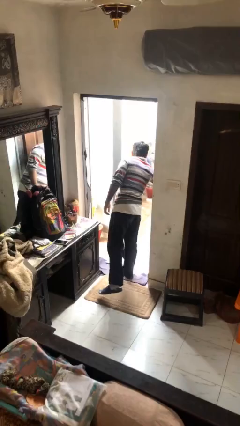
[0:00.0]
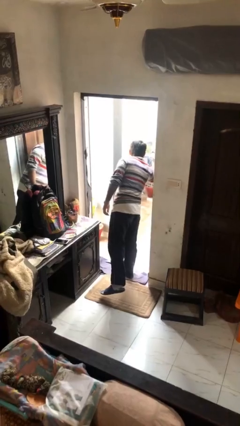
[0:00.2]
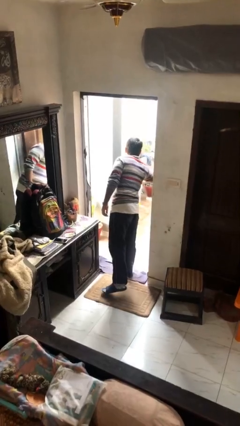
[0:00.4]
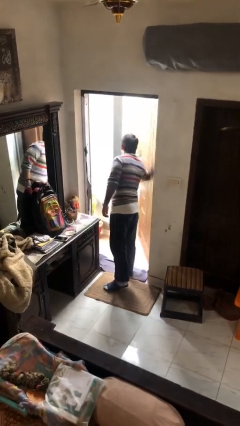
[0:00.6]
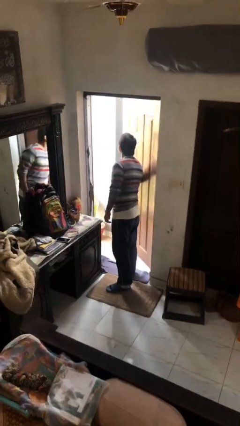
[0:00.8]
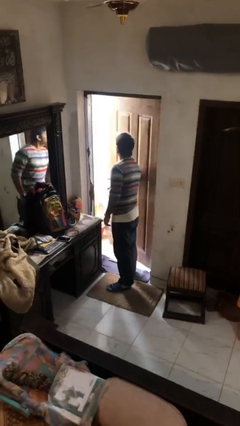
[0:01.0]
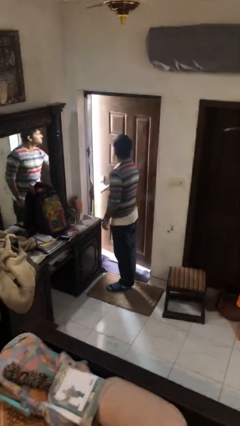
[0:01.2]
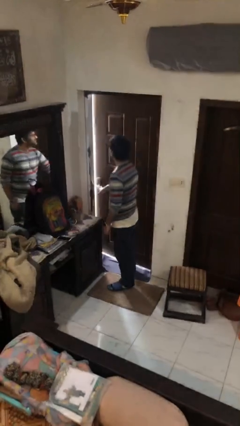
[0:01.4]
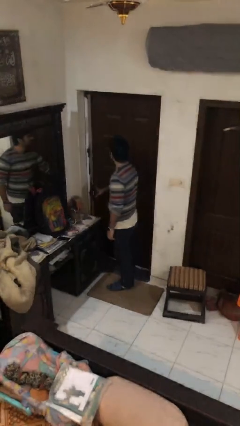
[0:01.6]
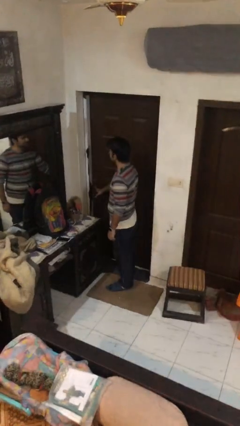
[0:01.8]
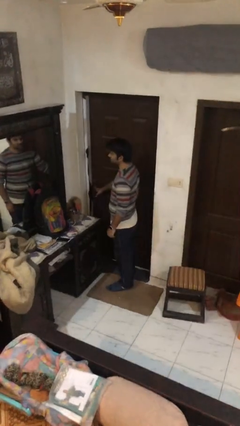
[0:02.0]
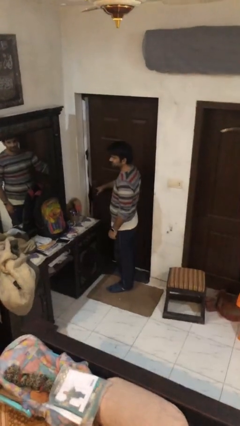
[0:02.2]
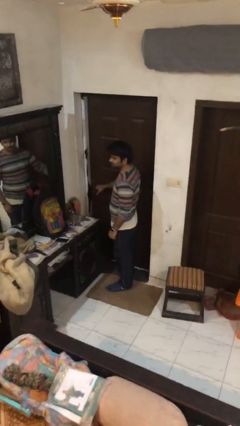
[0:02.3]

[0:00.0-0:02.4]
person closes facility door

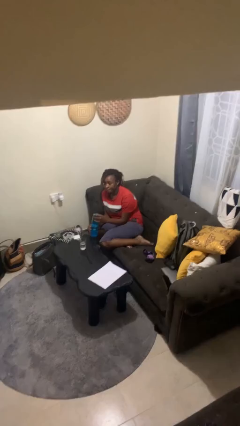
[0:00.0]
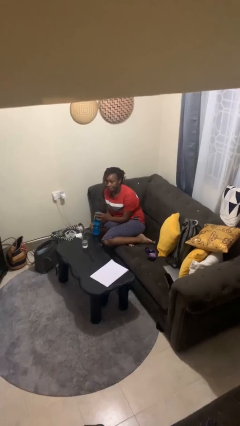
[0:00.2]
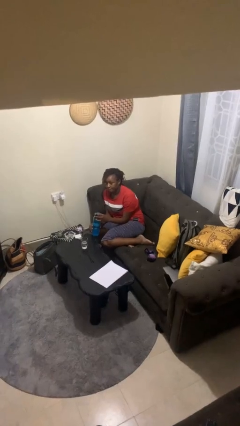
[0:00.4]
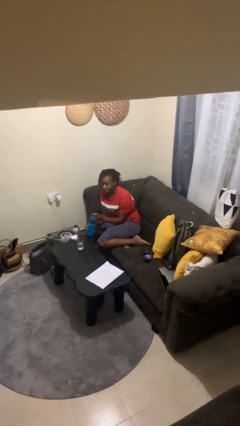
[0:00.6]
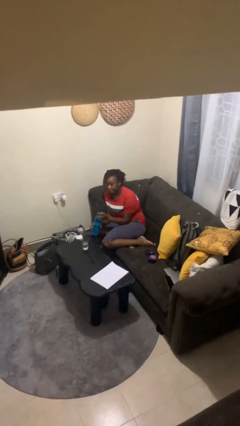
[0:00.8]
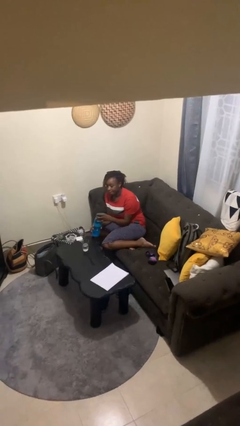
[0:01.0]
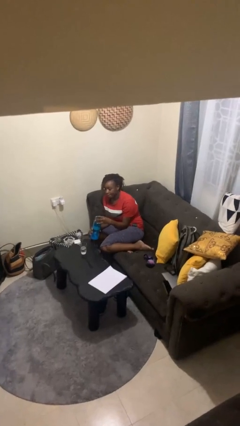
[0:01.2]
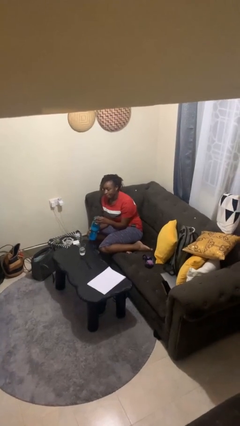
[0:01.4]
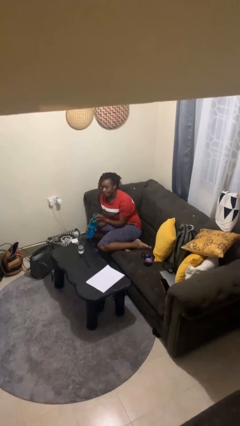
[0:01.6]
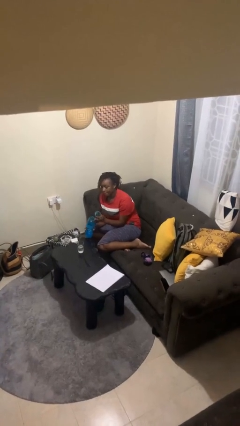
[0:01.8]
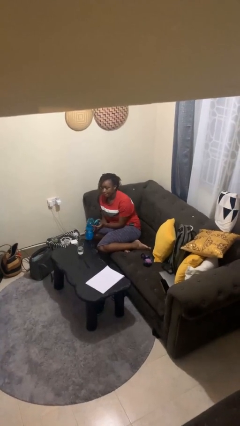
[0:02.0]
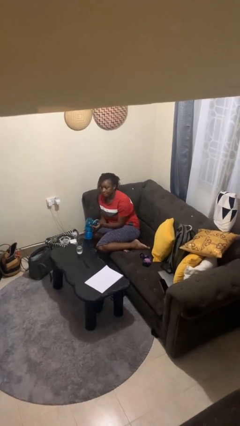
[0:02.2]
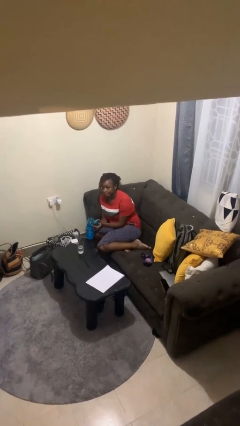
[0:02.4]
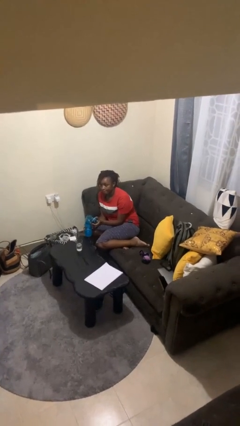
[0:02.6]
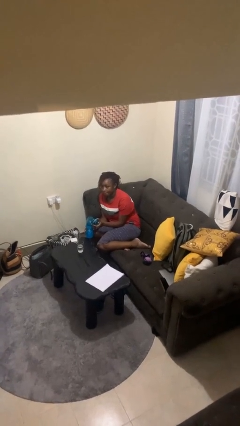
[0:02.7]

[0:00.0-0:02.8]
person unscrews lid from bottle

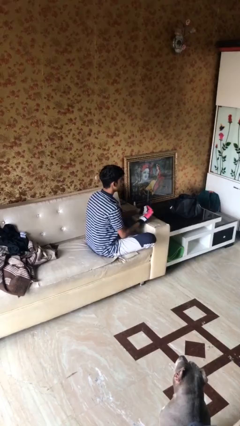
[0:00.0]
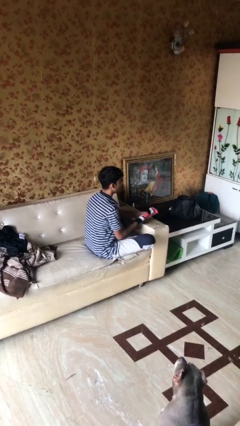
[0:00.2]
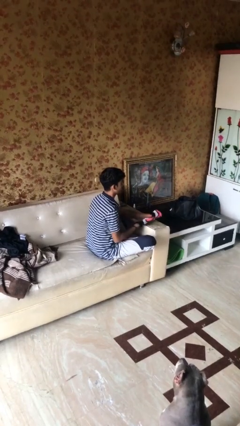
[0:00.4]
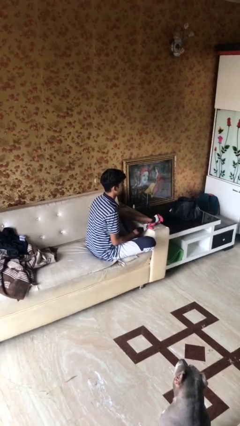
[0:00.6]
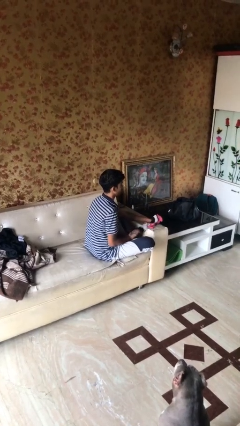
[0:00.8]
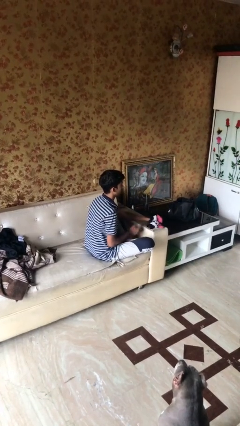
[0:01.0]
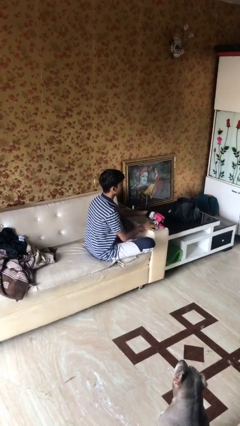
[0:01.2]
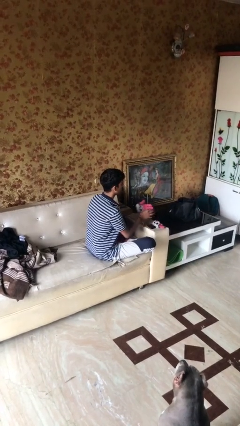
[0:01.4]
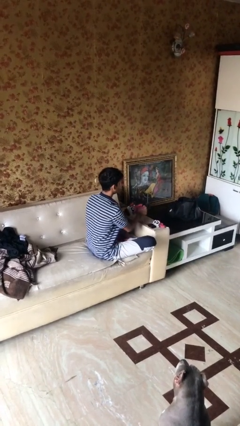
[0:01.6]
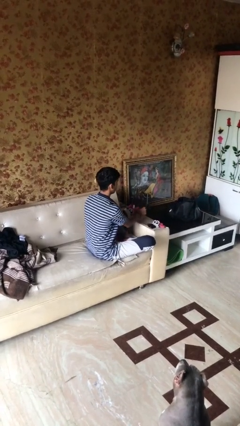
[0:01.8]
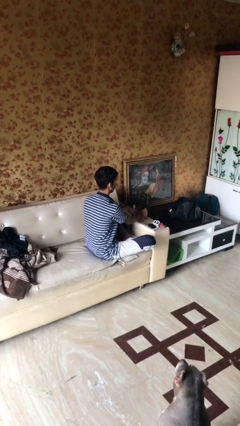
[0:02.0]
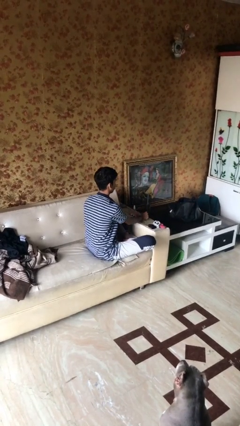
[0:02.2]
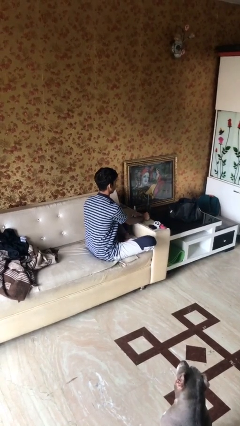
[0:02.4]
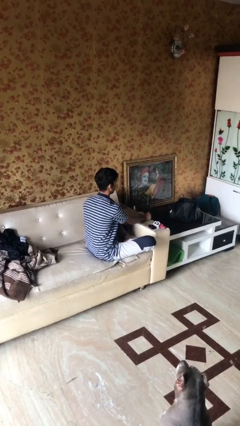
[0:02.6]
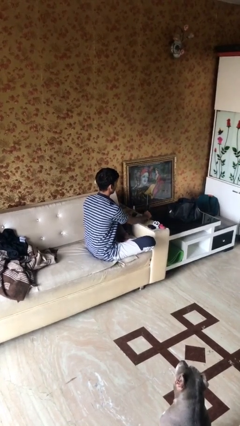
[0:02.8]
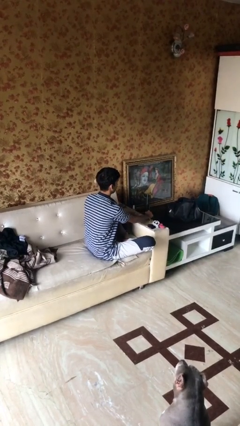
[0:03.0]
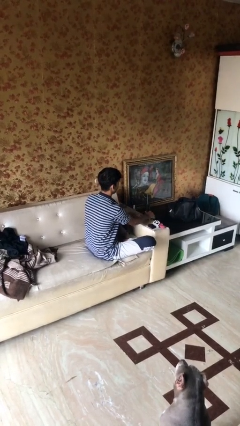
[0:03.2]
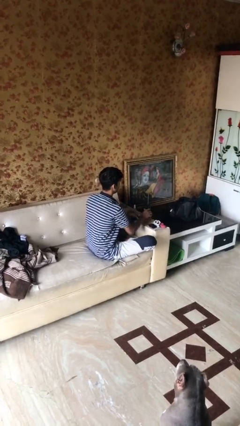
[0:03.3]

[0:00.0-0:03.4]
person takes off gloves

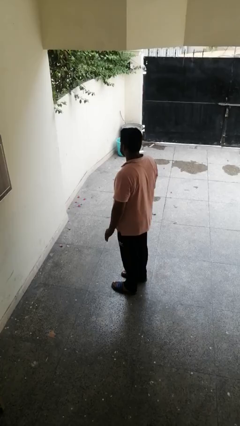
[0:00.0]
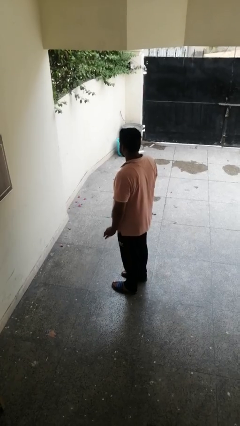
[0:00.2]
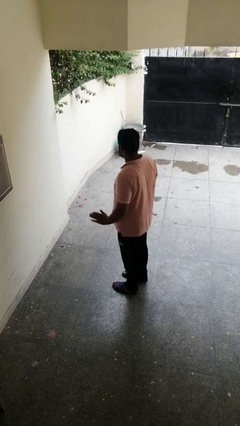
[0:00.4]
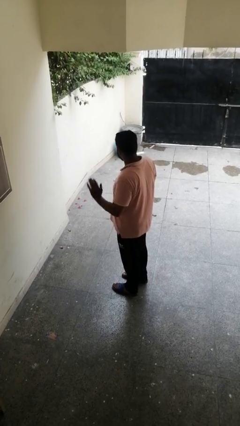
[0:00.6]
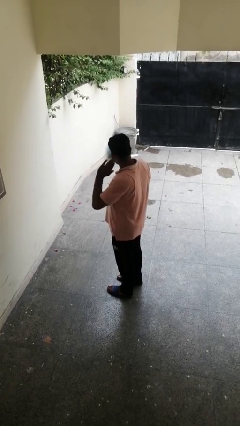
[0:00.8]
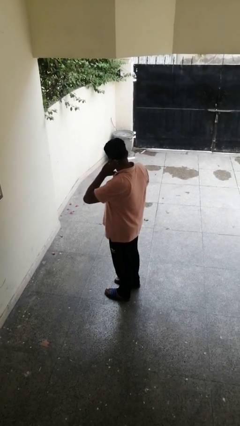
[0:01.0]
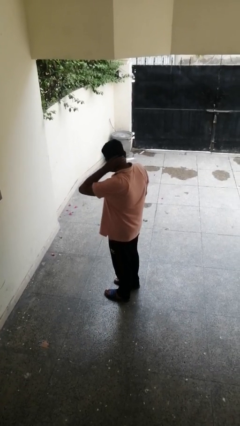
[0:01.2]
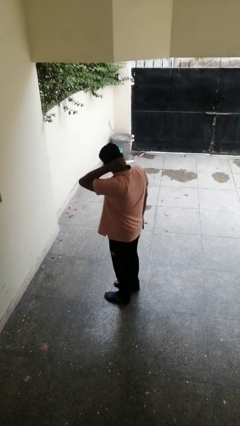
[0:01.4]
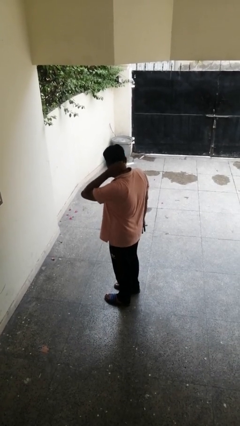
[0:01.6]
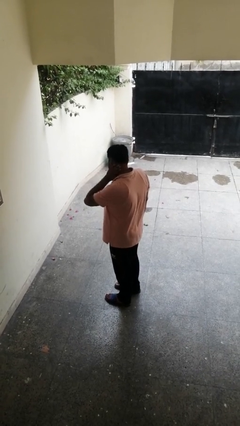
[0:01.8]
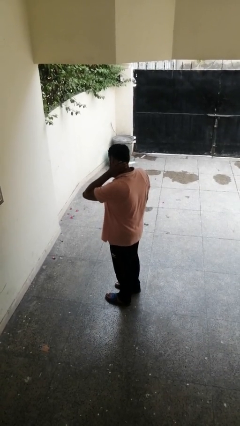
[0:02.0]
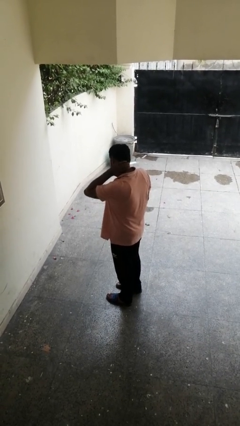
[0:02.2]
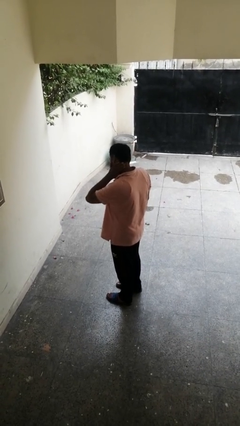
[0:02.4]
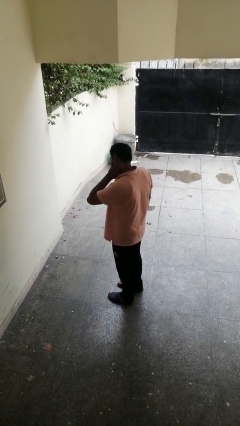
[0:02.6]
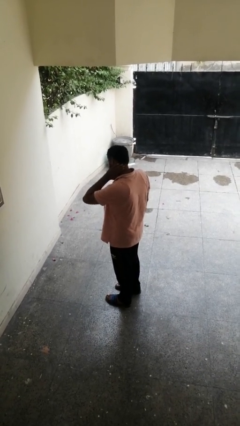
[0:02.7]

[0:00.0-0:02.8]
person rubs neck

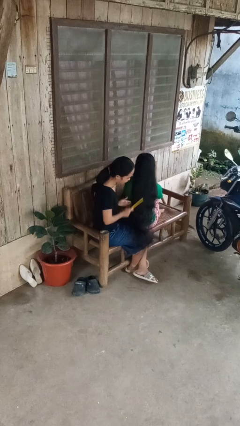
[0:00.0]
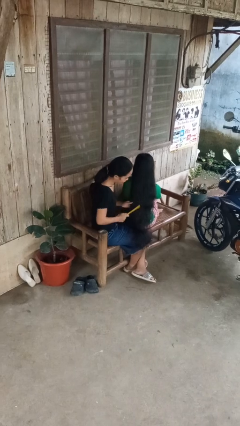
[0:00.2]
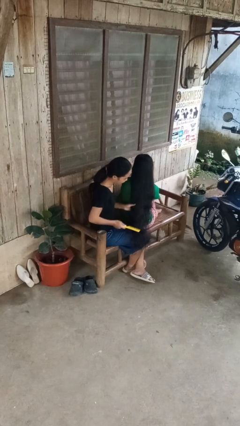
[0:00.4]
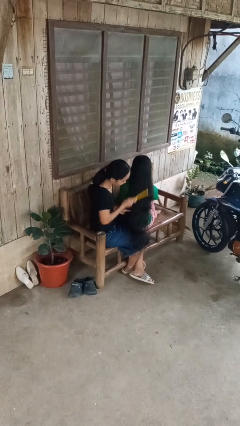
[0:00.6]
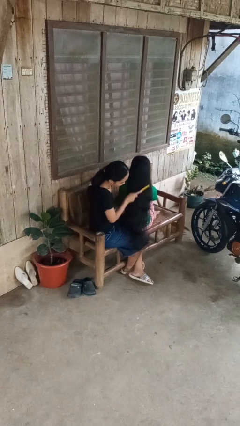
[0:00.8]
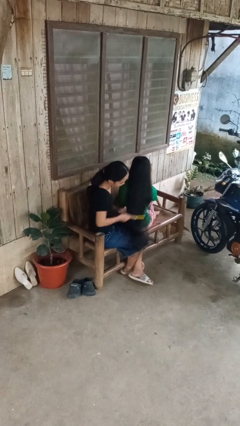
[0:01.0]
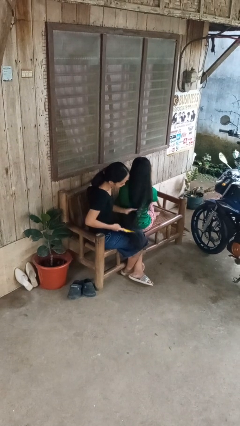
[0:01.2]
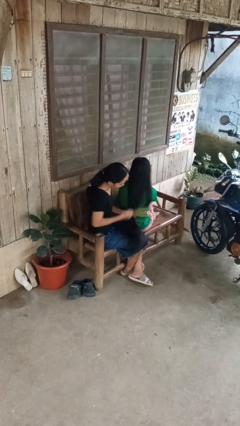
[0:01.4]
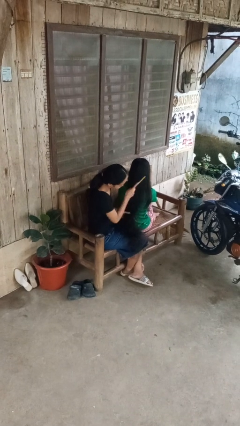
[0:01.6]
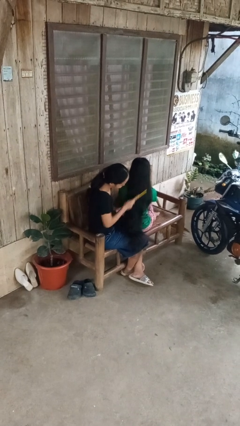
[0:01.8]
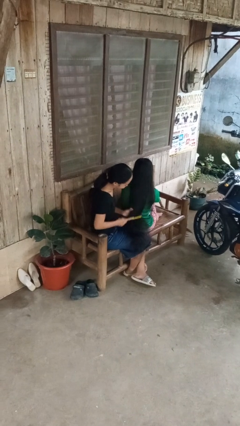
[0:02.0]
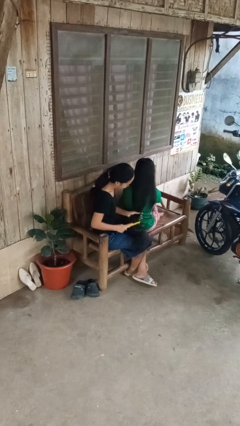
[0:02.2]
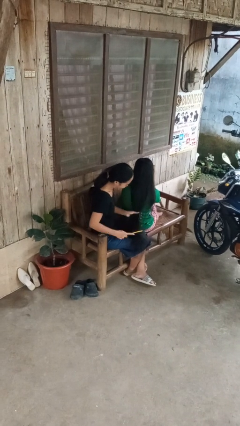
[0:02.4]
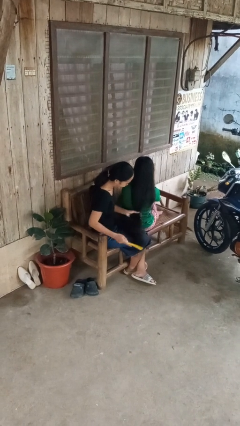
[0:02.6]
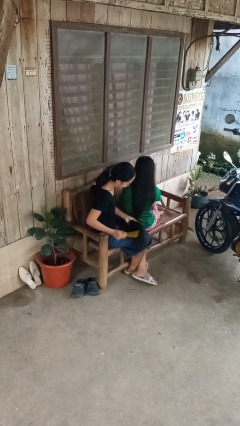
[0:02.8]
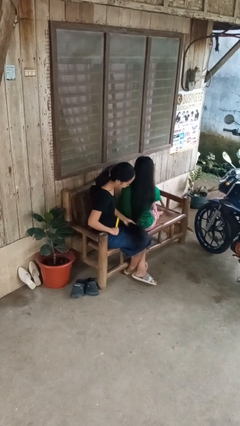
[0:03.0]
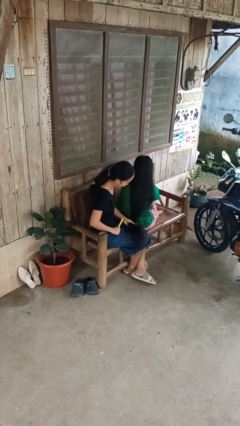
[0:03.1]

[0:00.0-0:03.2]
person brushes hair of person

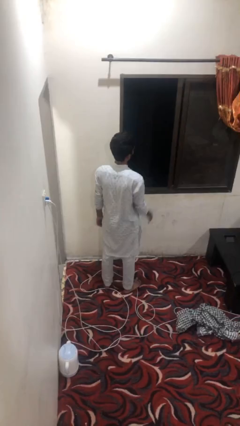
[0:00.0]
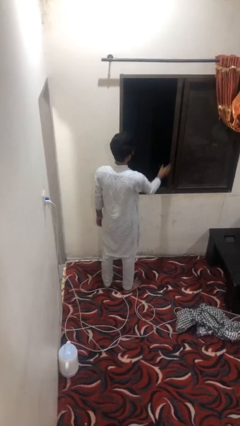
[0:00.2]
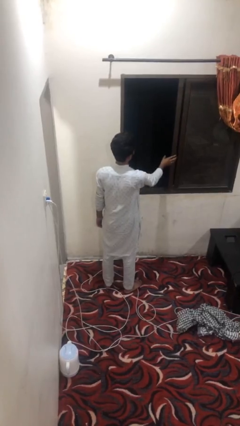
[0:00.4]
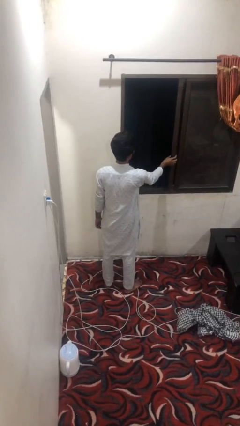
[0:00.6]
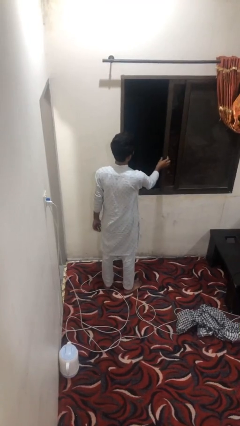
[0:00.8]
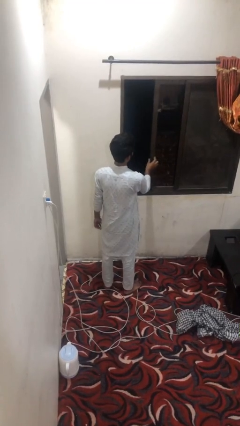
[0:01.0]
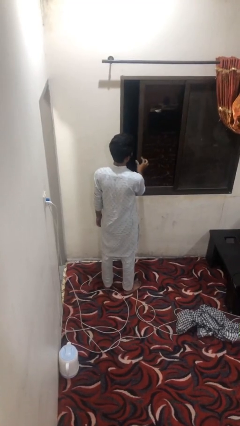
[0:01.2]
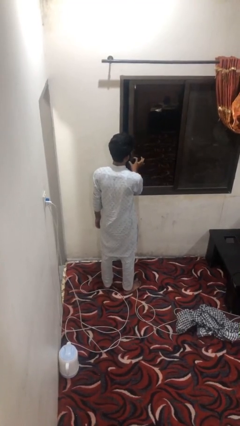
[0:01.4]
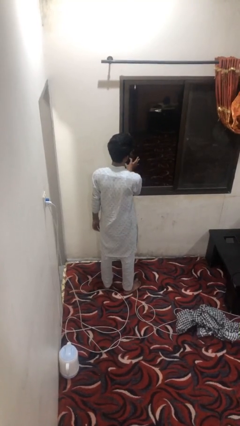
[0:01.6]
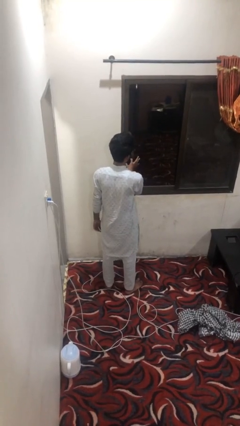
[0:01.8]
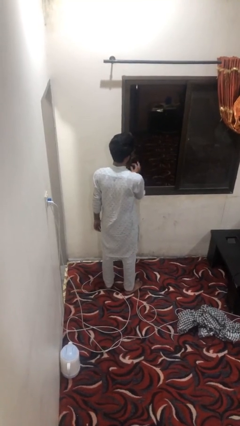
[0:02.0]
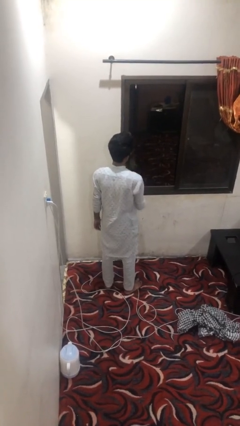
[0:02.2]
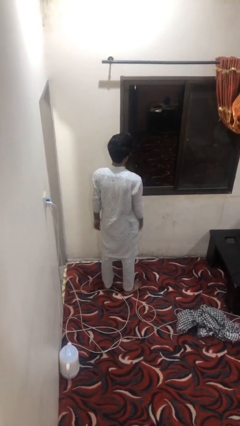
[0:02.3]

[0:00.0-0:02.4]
person closes home window

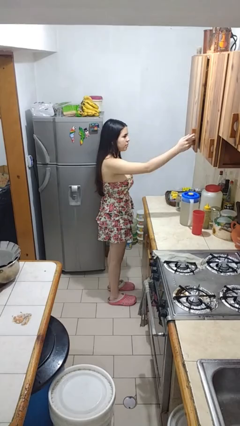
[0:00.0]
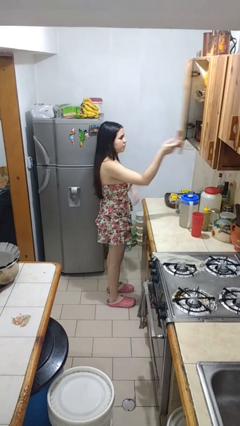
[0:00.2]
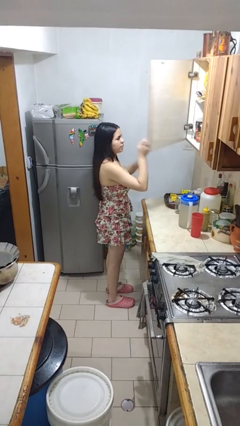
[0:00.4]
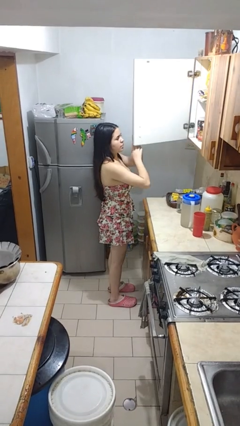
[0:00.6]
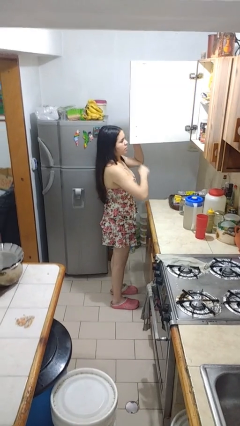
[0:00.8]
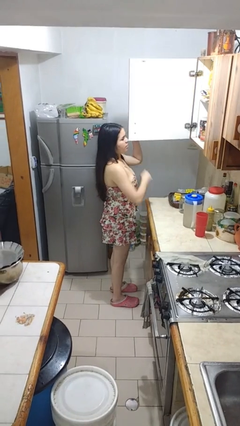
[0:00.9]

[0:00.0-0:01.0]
person opens cabinet
